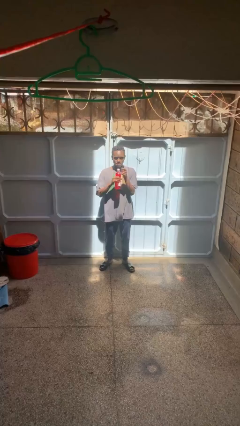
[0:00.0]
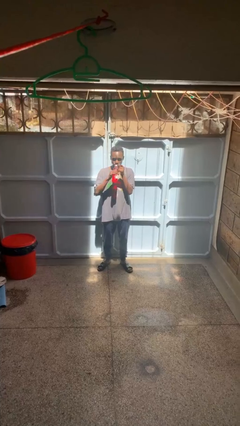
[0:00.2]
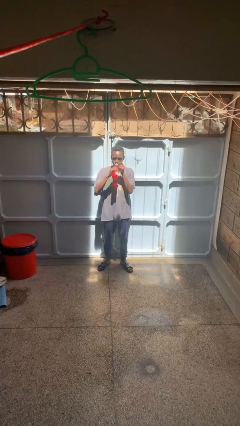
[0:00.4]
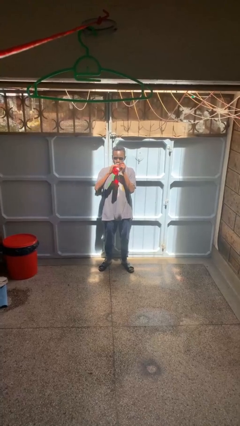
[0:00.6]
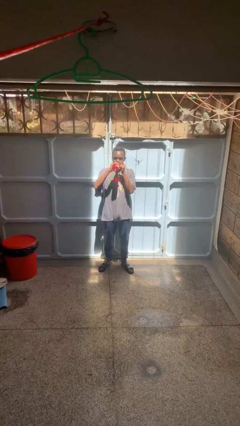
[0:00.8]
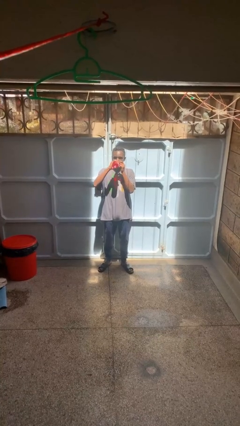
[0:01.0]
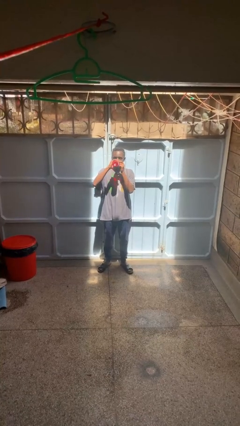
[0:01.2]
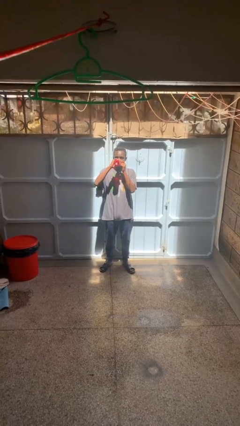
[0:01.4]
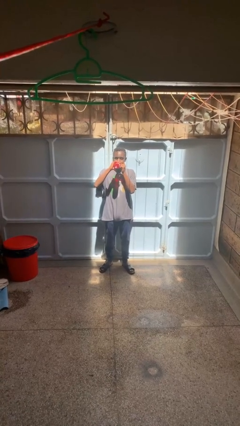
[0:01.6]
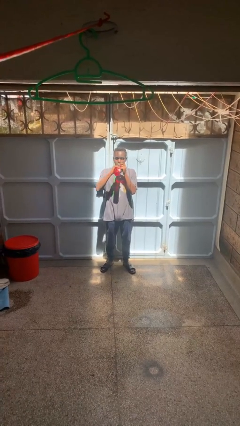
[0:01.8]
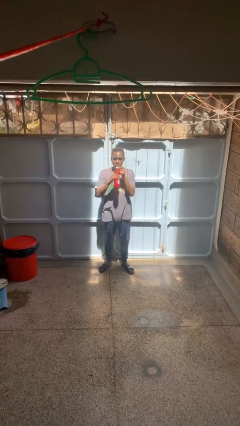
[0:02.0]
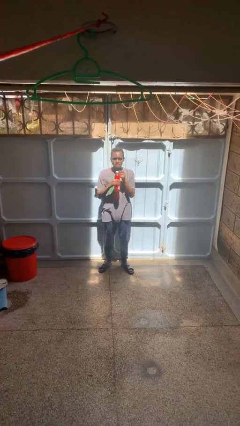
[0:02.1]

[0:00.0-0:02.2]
person drinks from beverage can

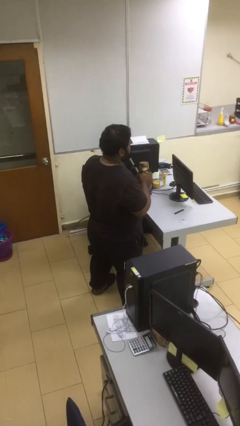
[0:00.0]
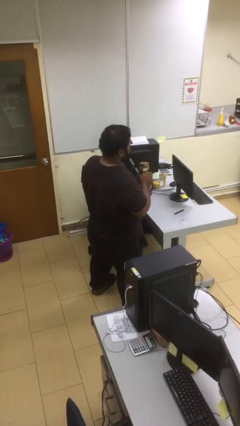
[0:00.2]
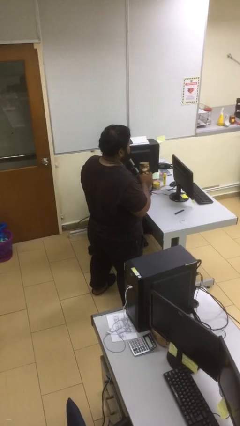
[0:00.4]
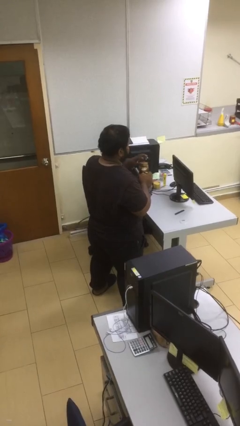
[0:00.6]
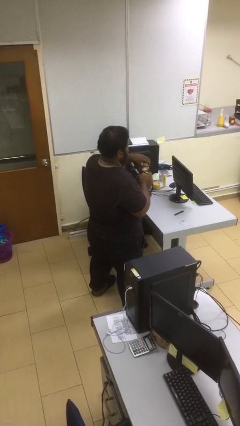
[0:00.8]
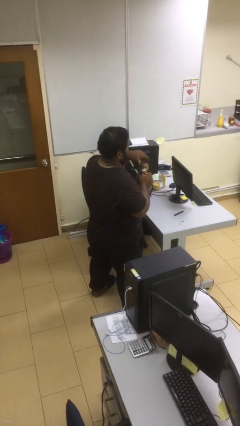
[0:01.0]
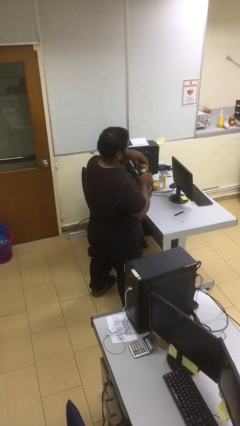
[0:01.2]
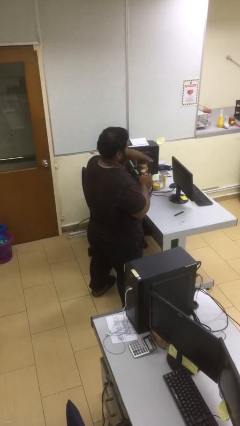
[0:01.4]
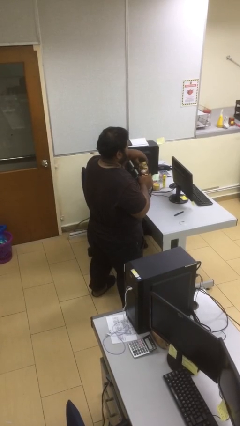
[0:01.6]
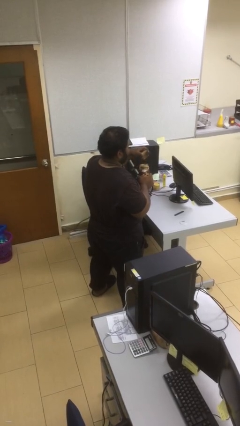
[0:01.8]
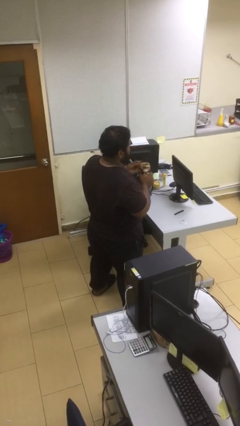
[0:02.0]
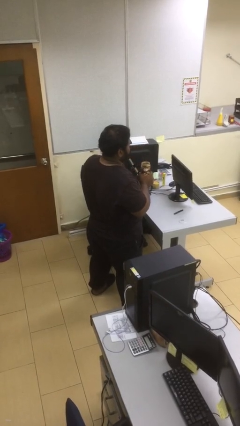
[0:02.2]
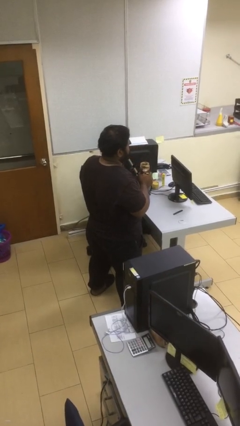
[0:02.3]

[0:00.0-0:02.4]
person opens jar

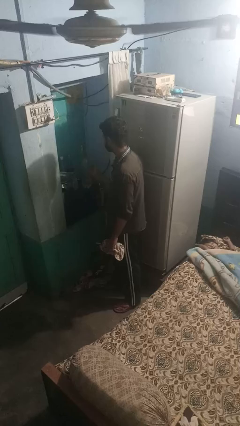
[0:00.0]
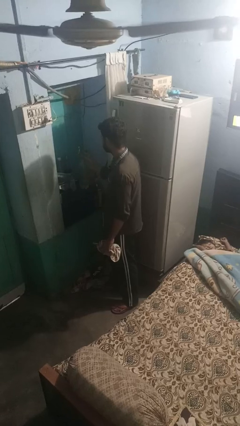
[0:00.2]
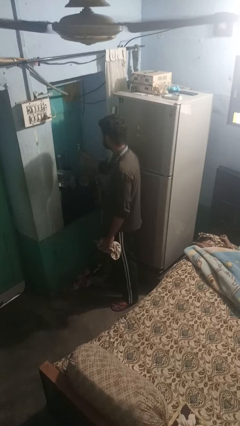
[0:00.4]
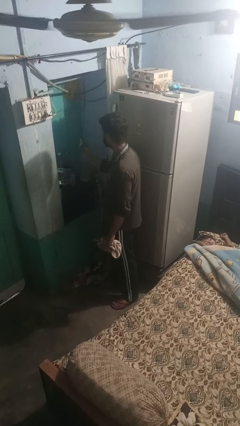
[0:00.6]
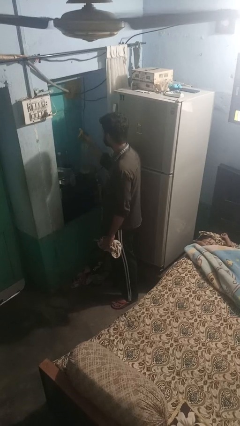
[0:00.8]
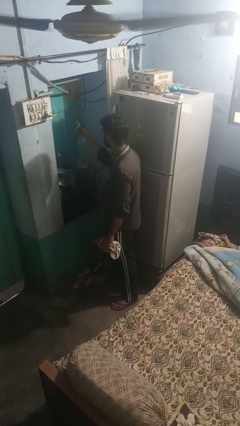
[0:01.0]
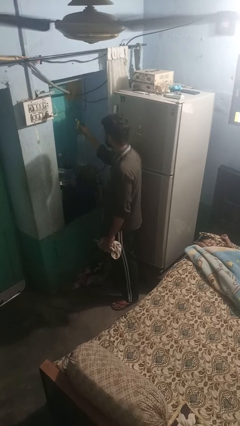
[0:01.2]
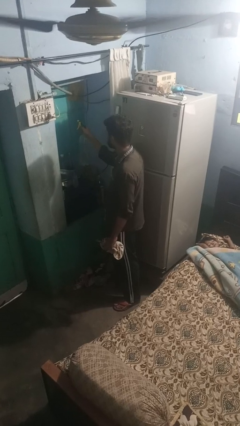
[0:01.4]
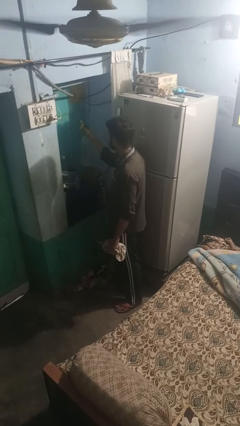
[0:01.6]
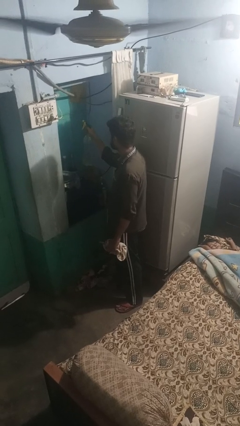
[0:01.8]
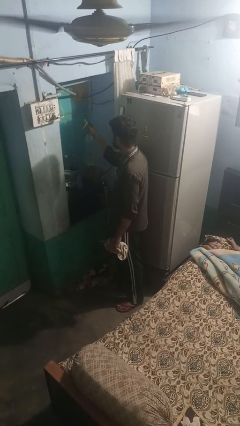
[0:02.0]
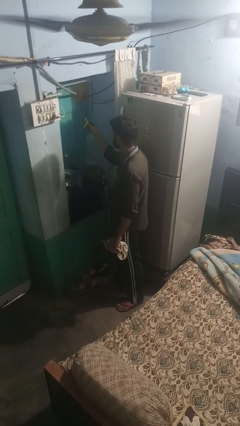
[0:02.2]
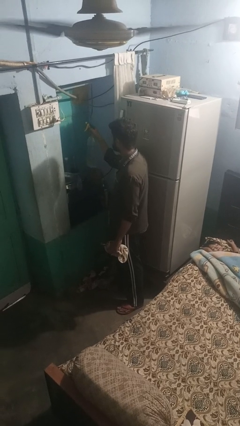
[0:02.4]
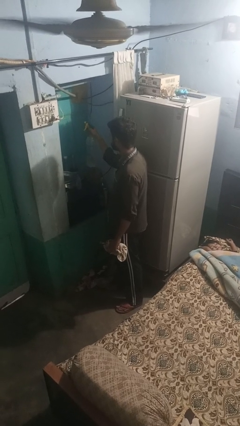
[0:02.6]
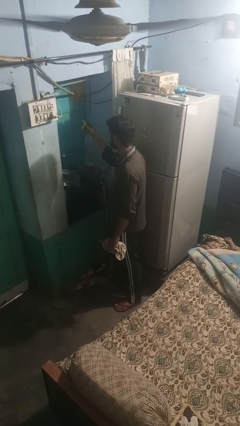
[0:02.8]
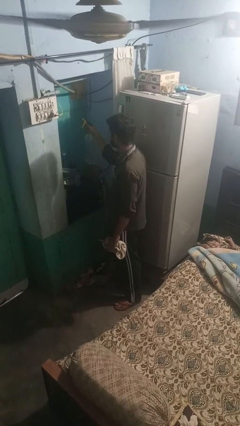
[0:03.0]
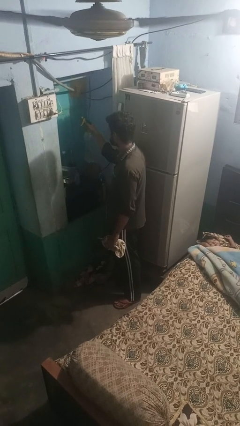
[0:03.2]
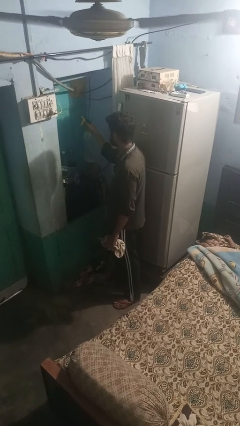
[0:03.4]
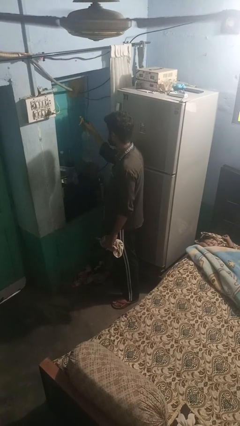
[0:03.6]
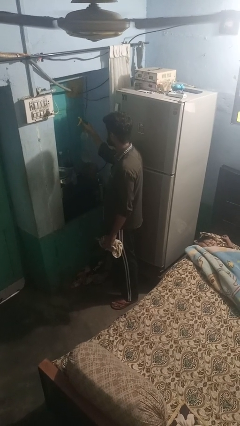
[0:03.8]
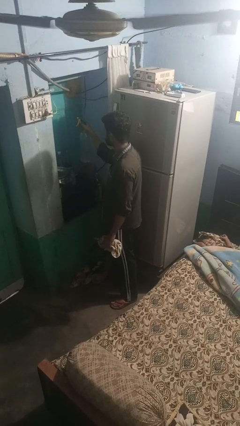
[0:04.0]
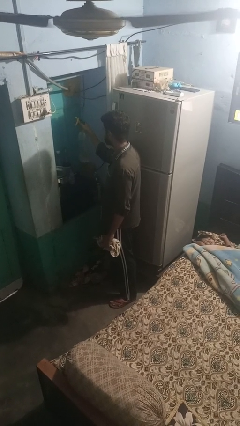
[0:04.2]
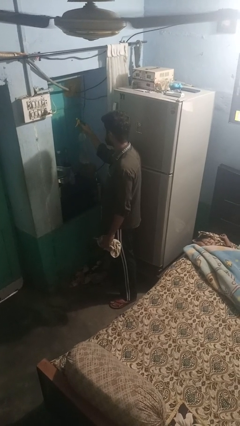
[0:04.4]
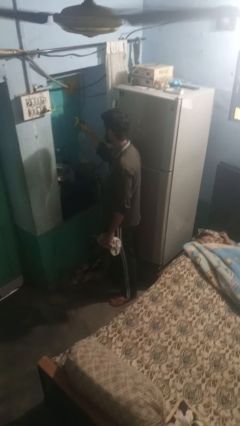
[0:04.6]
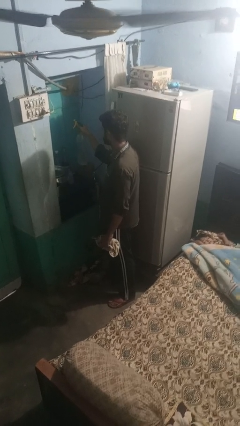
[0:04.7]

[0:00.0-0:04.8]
person sprays from bottle

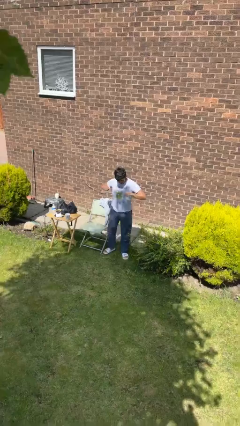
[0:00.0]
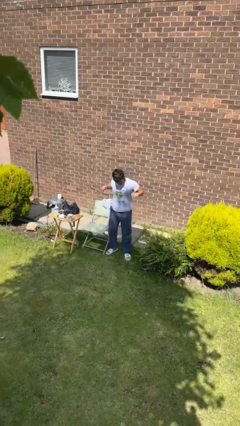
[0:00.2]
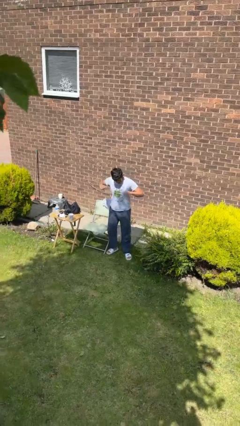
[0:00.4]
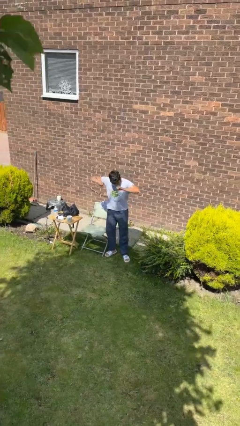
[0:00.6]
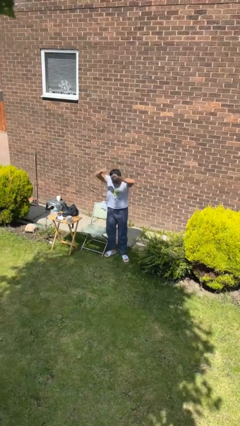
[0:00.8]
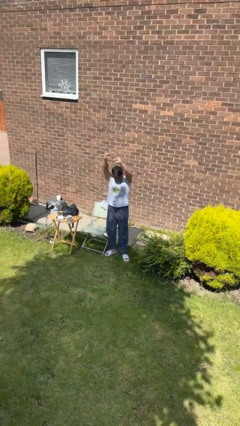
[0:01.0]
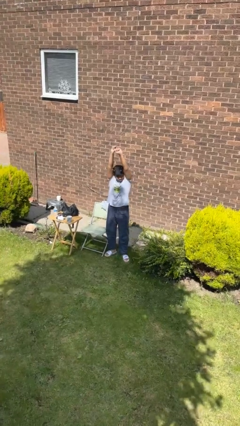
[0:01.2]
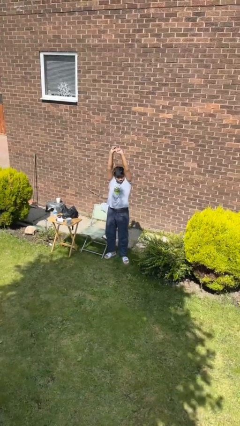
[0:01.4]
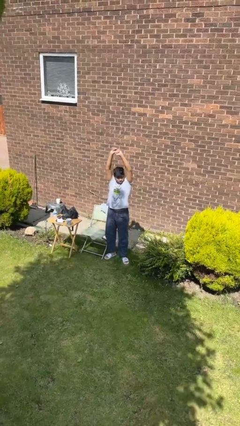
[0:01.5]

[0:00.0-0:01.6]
person stretches arms over head

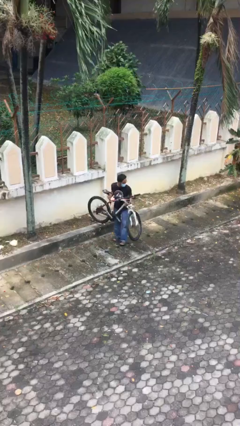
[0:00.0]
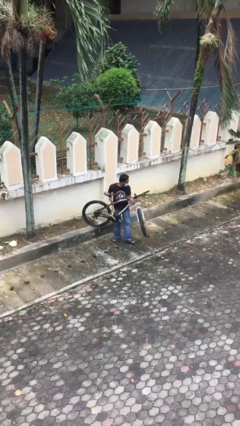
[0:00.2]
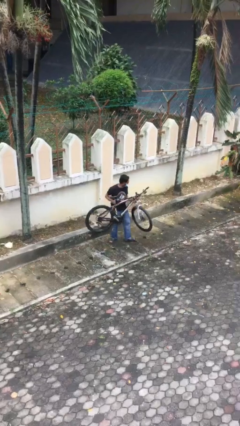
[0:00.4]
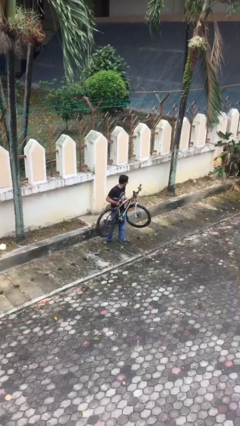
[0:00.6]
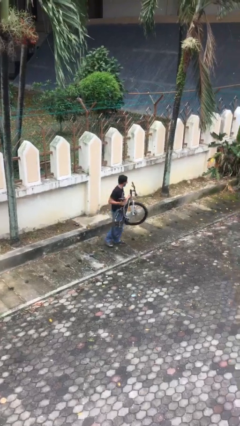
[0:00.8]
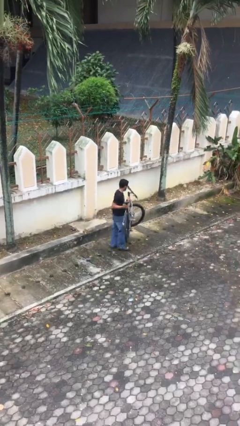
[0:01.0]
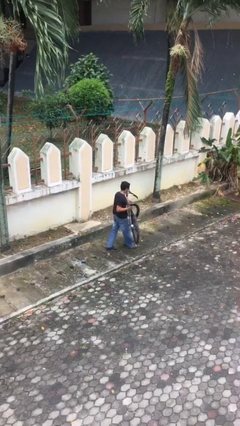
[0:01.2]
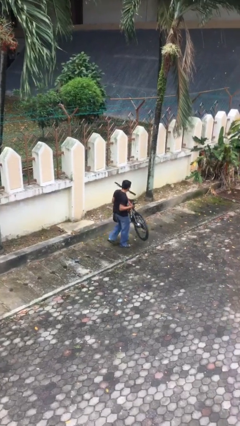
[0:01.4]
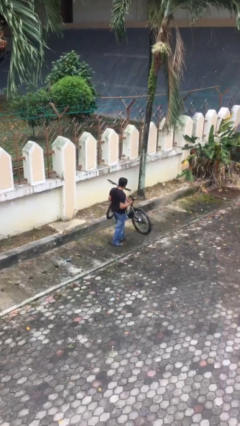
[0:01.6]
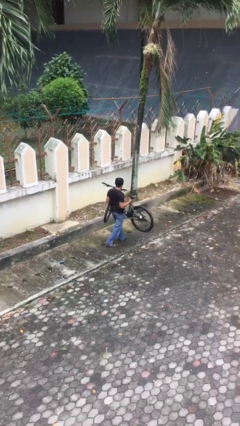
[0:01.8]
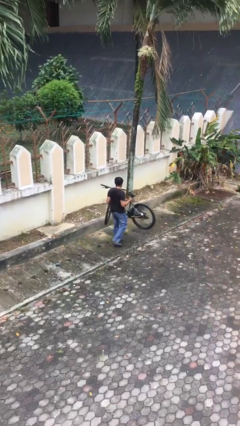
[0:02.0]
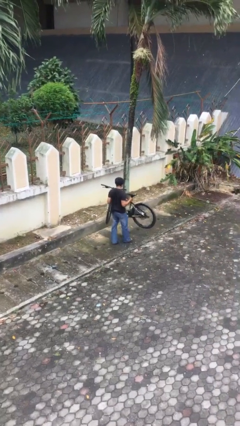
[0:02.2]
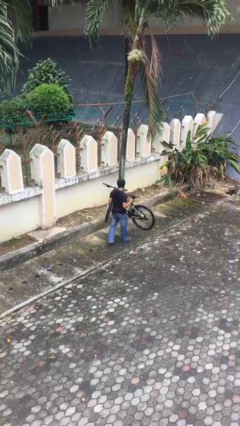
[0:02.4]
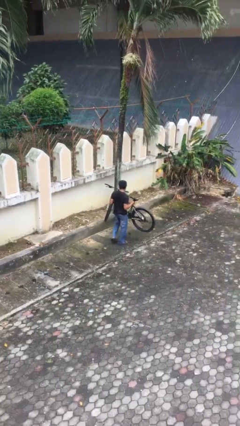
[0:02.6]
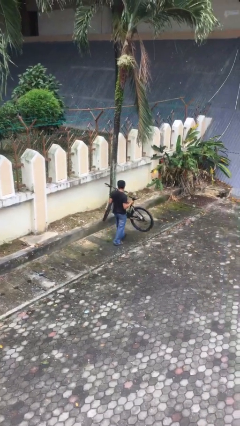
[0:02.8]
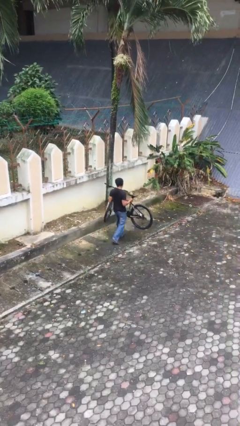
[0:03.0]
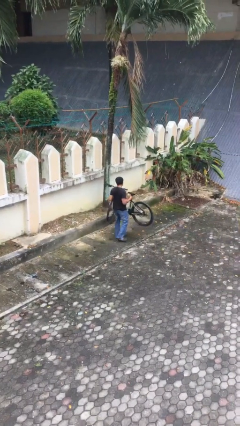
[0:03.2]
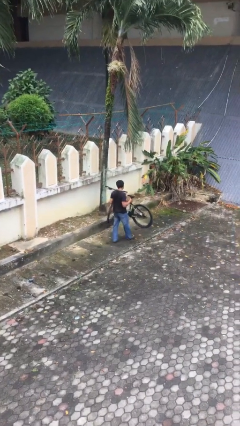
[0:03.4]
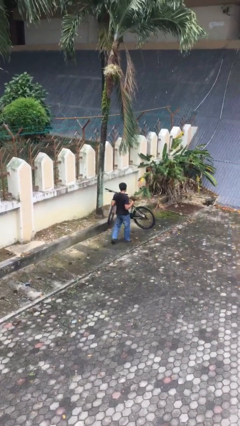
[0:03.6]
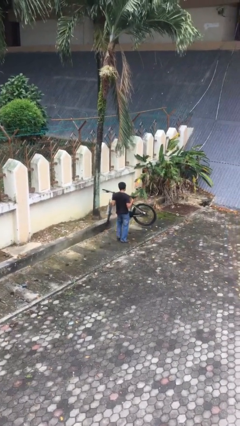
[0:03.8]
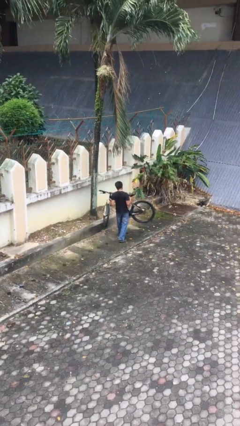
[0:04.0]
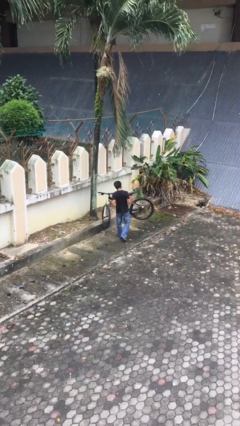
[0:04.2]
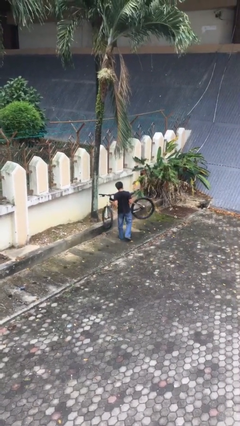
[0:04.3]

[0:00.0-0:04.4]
person carries heavy object

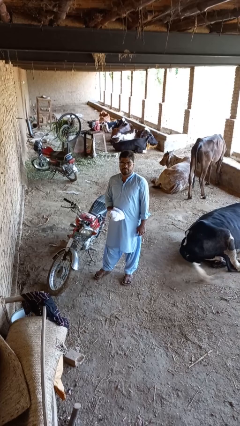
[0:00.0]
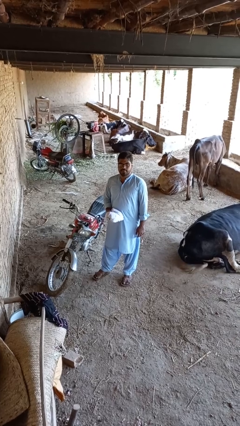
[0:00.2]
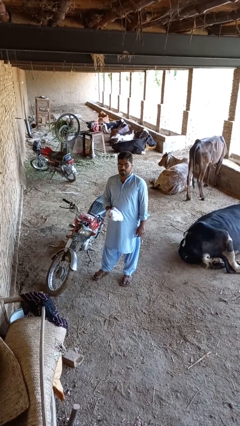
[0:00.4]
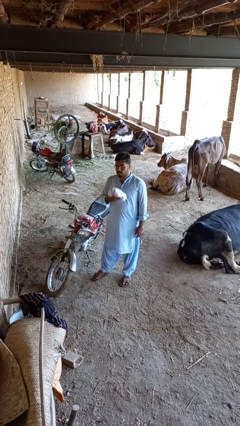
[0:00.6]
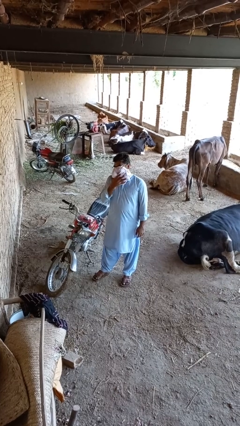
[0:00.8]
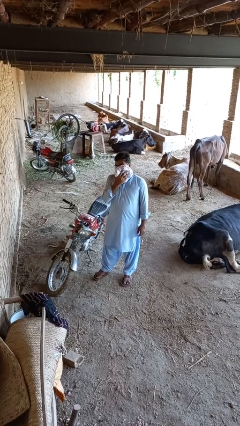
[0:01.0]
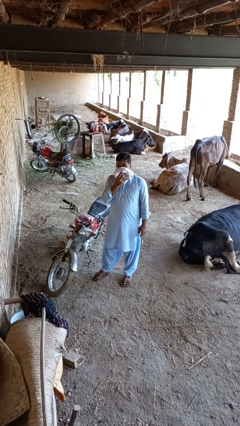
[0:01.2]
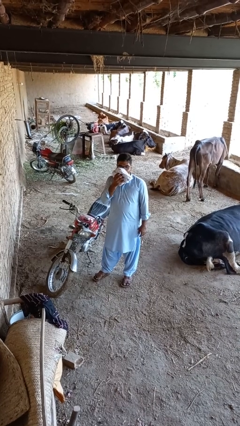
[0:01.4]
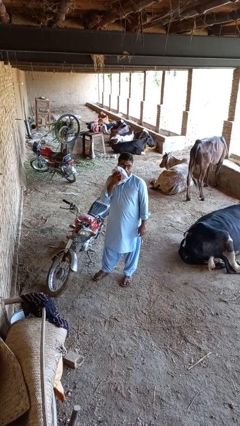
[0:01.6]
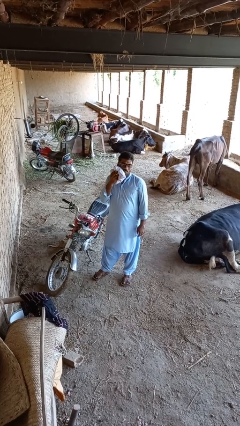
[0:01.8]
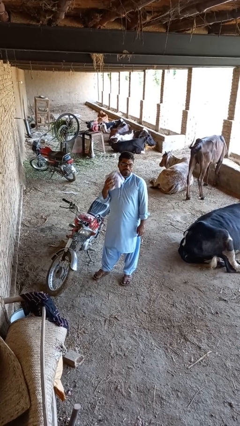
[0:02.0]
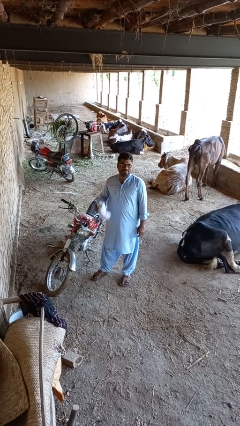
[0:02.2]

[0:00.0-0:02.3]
person wipes mouth with napkin
